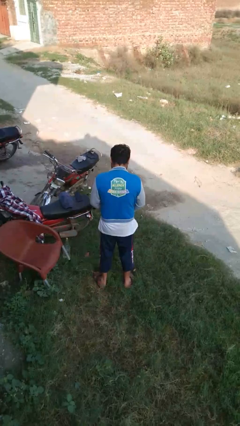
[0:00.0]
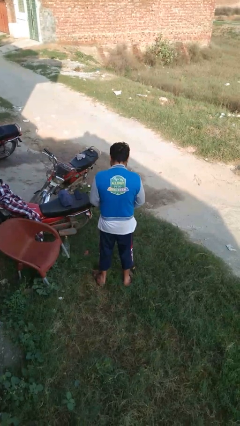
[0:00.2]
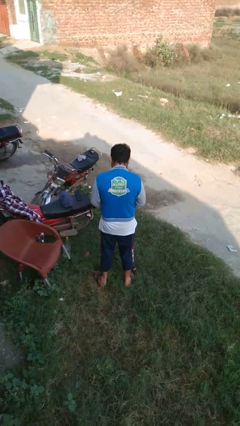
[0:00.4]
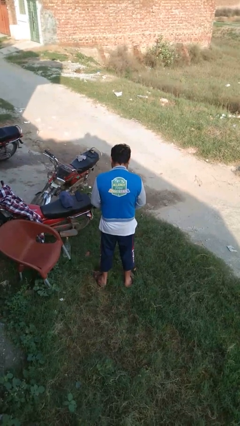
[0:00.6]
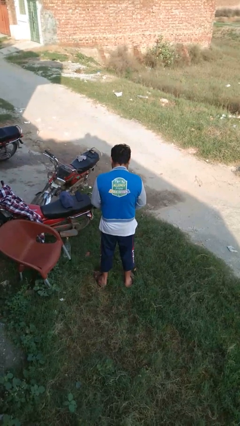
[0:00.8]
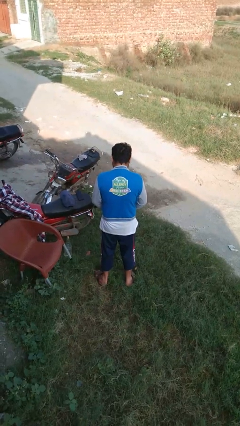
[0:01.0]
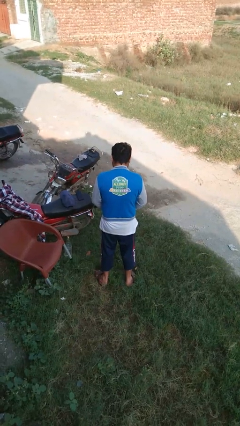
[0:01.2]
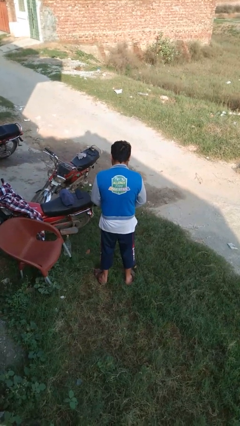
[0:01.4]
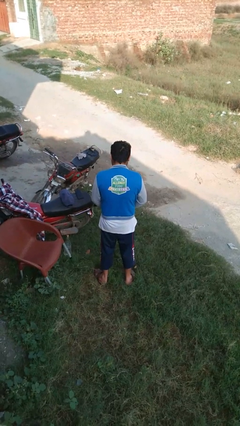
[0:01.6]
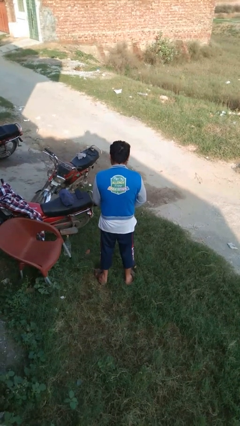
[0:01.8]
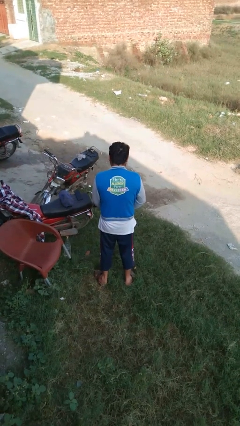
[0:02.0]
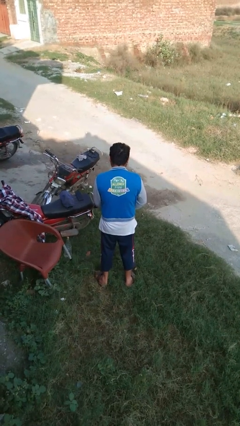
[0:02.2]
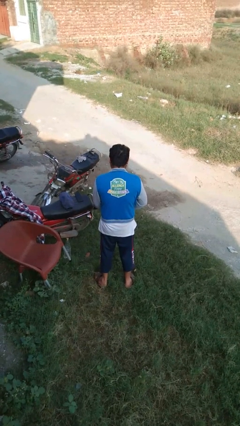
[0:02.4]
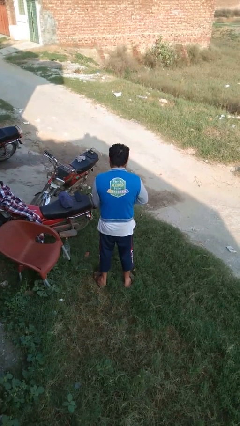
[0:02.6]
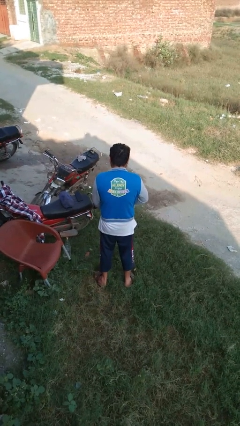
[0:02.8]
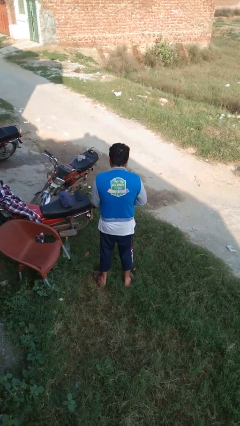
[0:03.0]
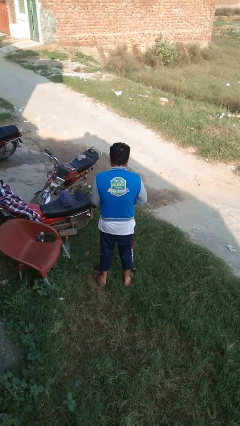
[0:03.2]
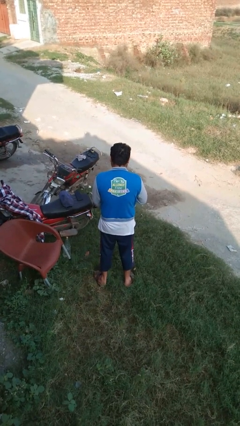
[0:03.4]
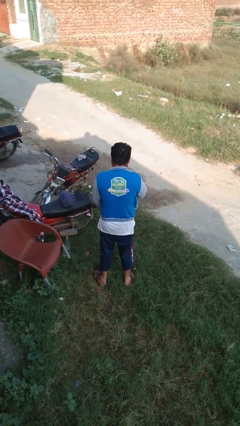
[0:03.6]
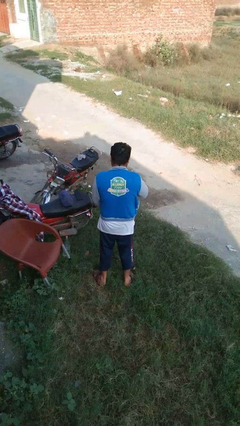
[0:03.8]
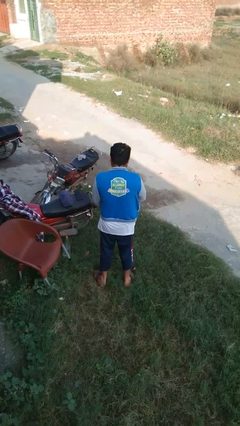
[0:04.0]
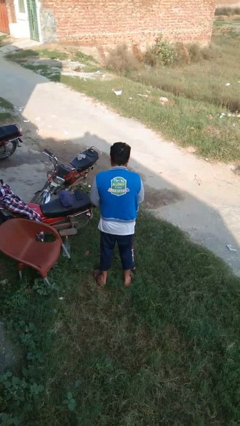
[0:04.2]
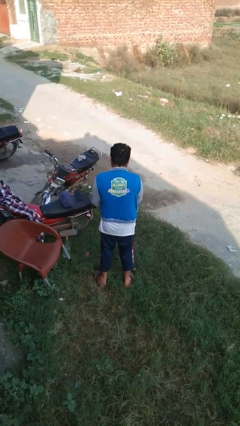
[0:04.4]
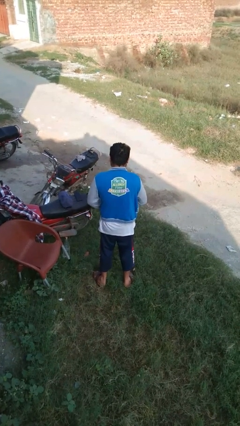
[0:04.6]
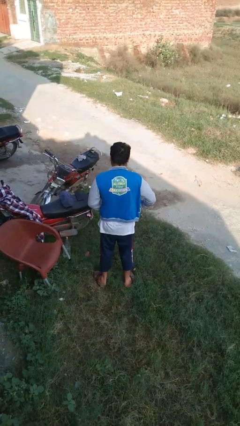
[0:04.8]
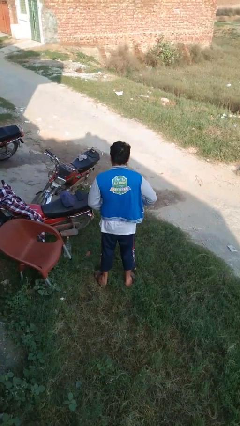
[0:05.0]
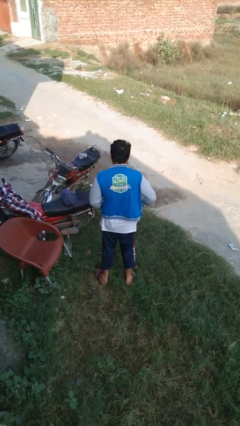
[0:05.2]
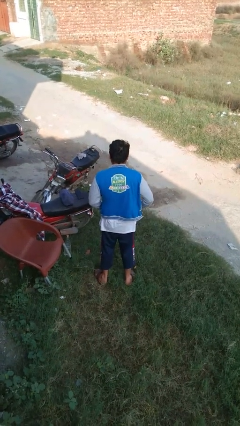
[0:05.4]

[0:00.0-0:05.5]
person unzips jacket

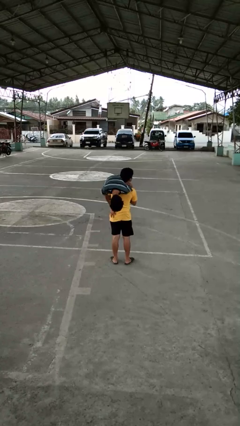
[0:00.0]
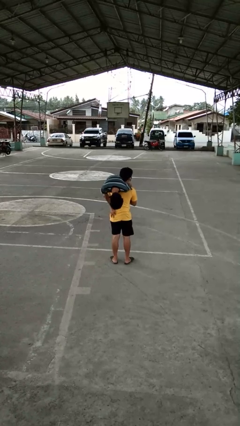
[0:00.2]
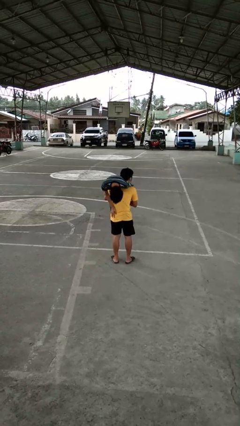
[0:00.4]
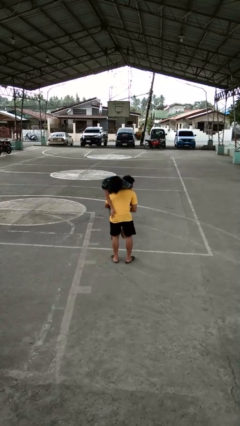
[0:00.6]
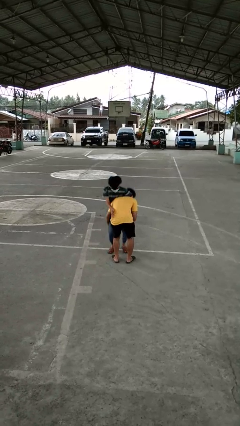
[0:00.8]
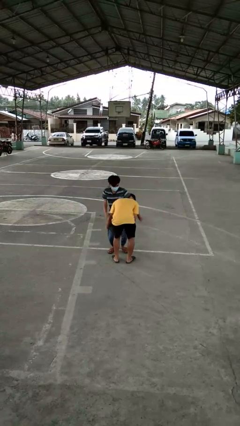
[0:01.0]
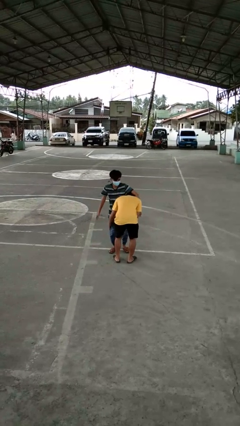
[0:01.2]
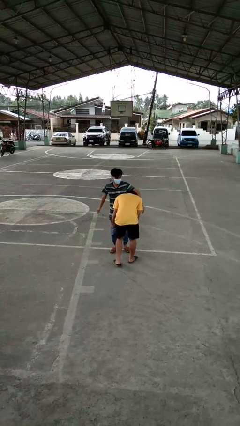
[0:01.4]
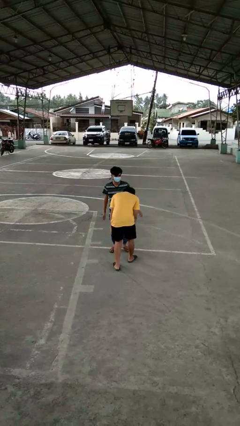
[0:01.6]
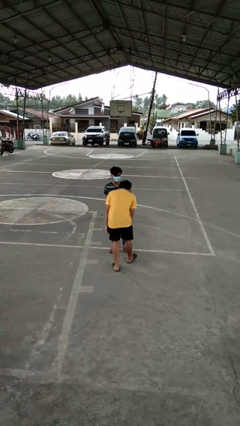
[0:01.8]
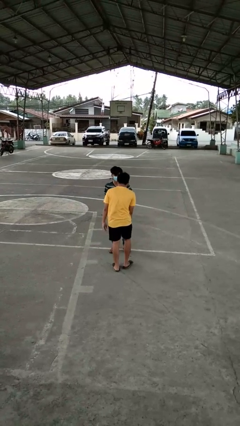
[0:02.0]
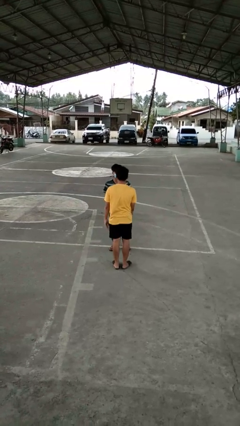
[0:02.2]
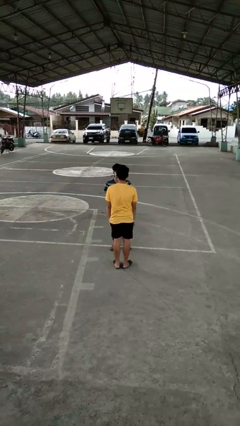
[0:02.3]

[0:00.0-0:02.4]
person puts down person

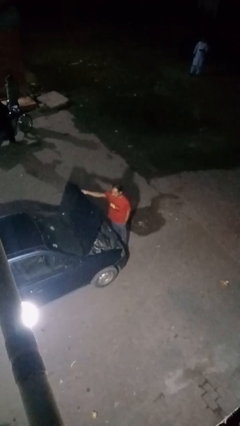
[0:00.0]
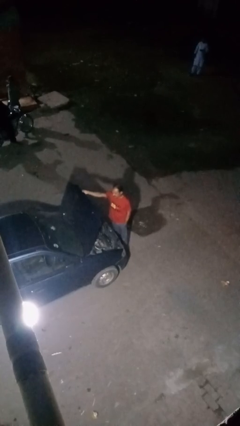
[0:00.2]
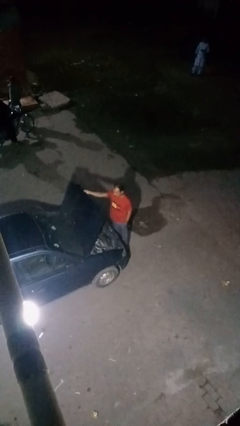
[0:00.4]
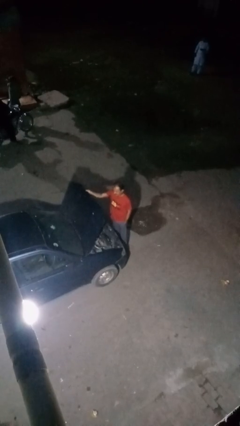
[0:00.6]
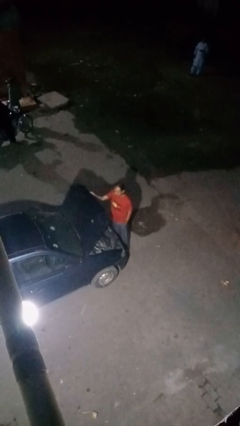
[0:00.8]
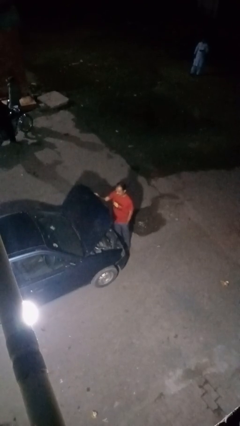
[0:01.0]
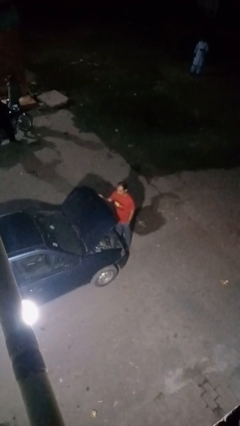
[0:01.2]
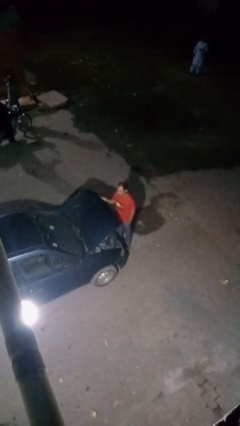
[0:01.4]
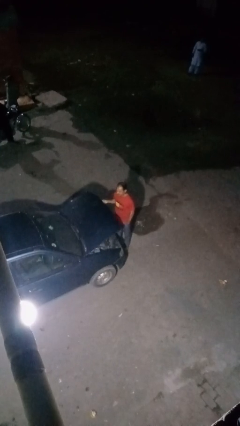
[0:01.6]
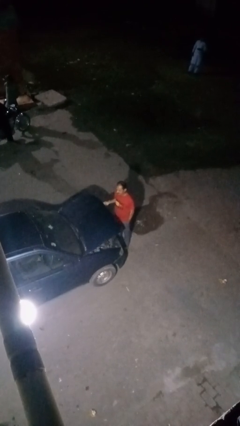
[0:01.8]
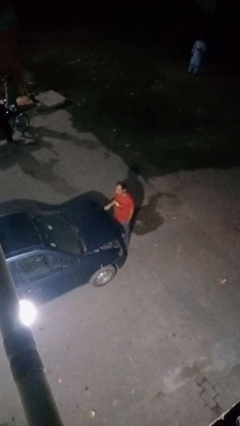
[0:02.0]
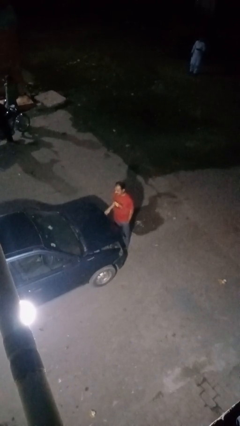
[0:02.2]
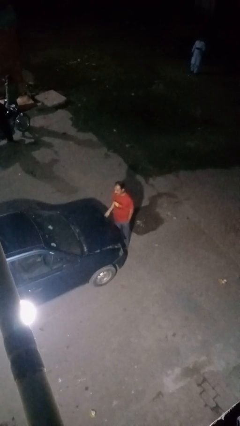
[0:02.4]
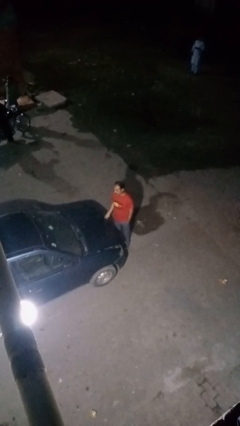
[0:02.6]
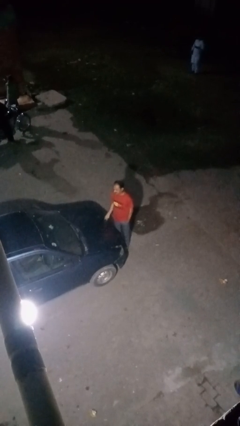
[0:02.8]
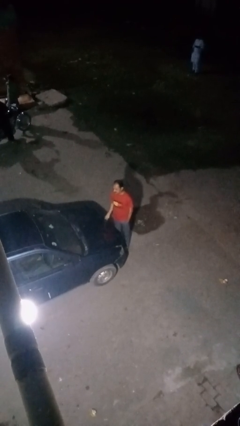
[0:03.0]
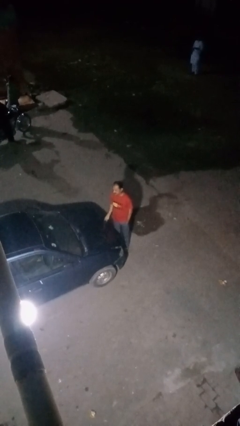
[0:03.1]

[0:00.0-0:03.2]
person closes car hood

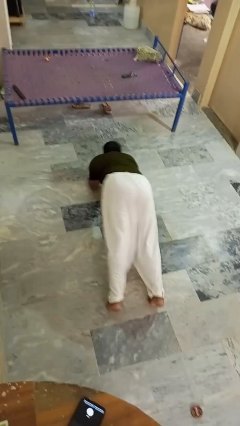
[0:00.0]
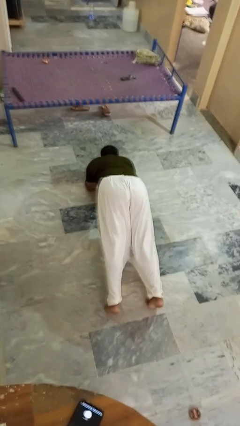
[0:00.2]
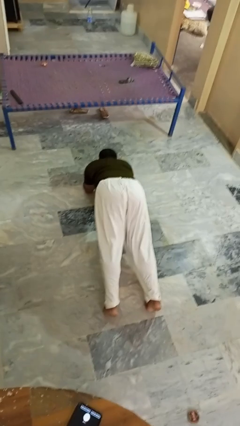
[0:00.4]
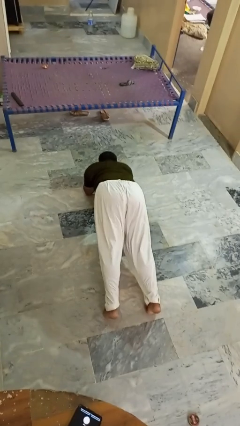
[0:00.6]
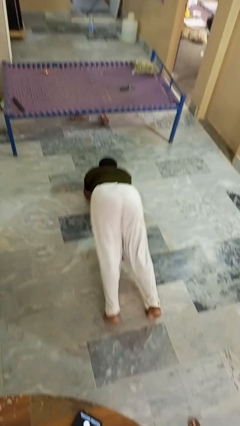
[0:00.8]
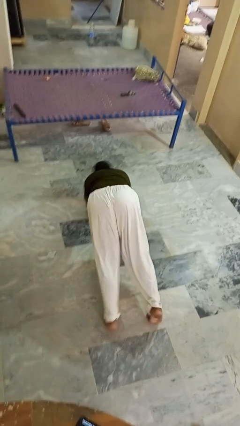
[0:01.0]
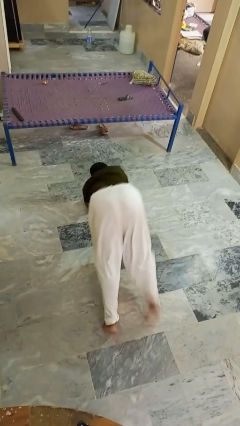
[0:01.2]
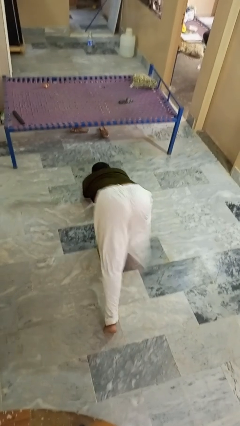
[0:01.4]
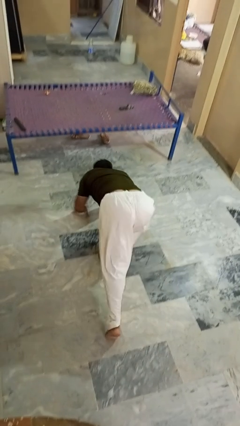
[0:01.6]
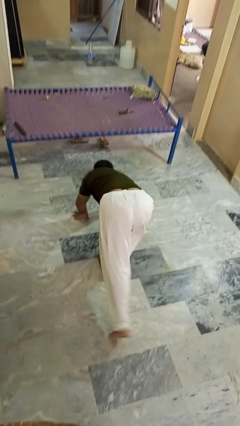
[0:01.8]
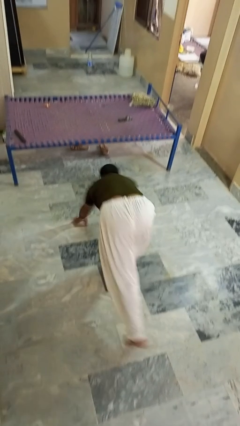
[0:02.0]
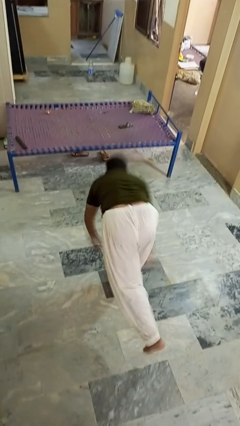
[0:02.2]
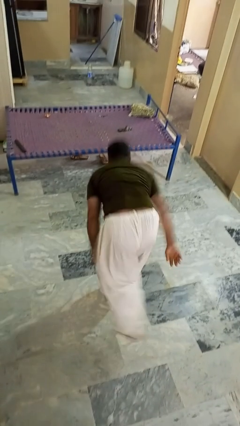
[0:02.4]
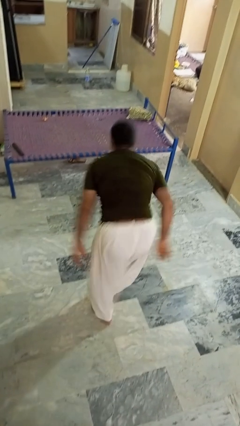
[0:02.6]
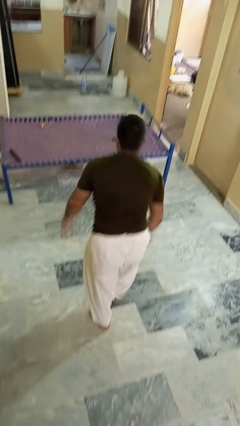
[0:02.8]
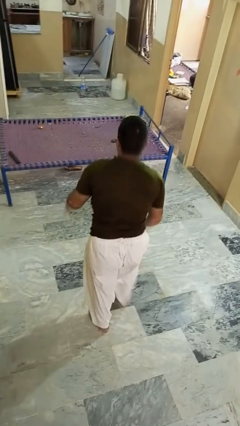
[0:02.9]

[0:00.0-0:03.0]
person stands up from floor

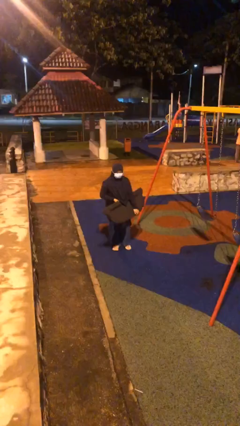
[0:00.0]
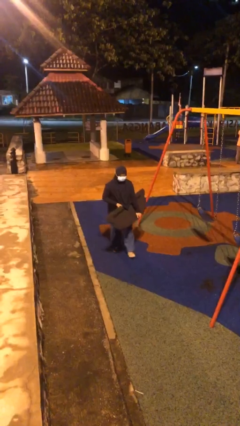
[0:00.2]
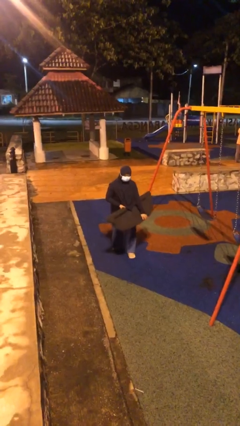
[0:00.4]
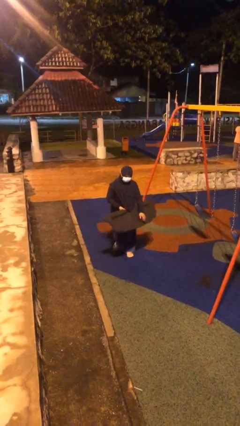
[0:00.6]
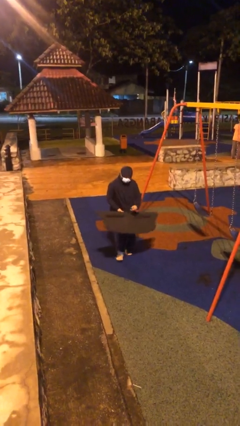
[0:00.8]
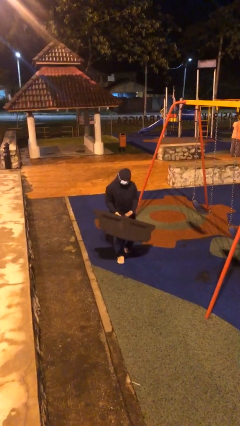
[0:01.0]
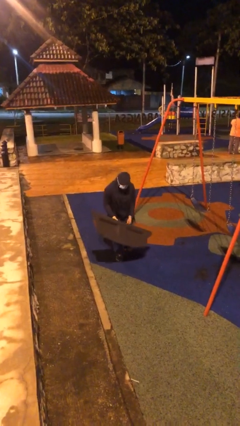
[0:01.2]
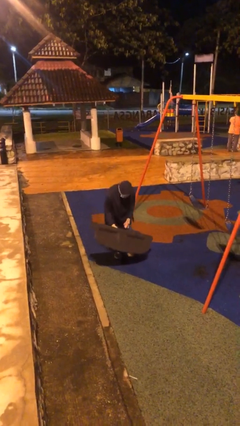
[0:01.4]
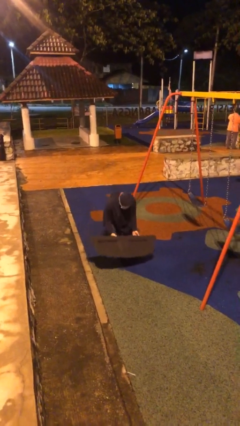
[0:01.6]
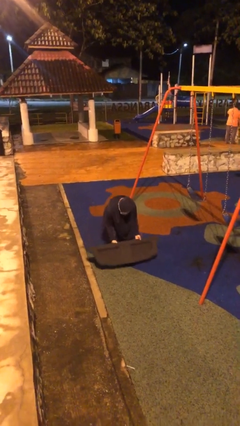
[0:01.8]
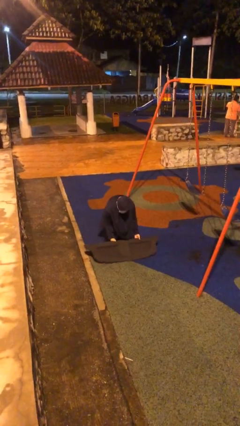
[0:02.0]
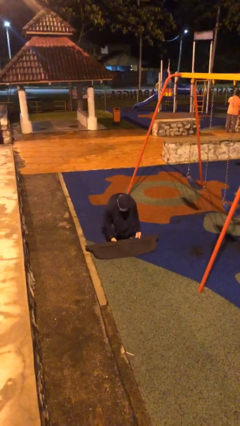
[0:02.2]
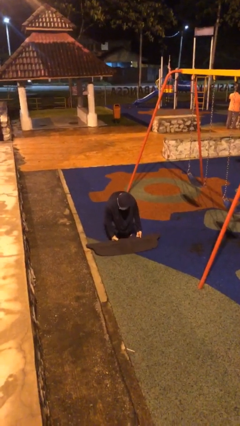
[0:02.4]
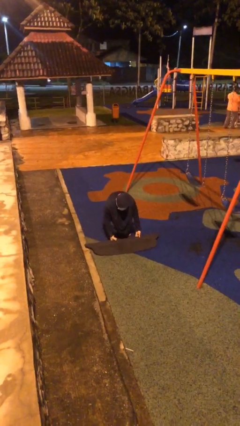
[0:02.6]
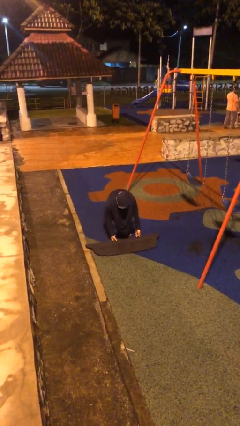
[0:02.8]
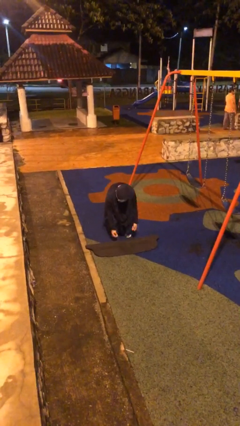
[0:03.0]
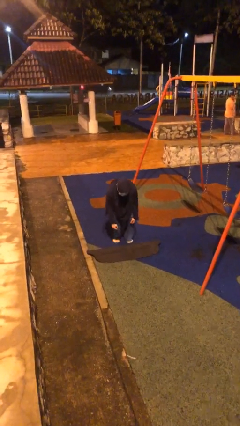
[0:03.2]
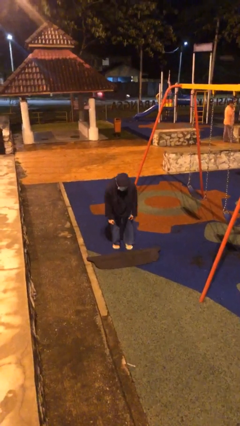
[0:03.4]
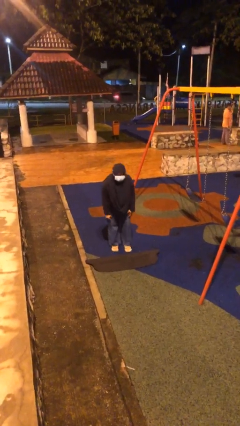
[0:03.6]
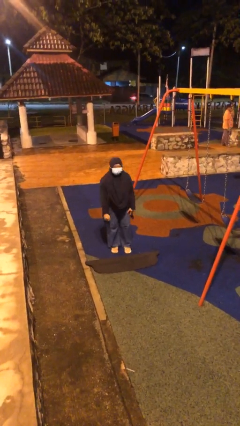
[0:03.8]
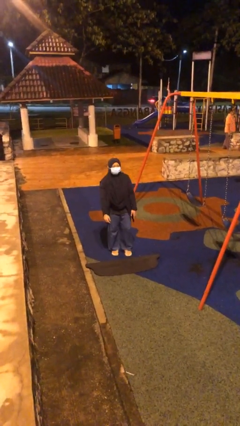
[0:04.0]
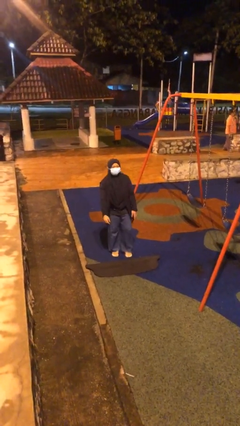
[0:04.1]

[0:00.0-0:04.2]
person puts down object on floor
